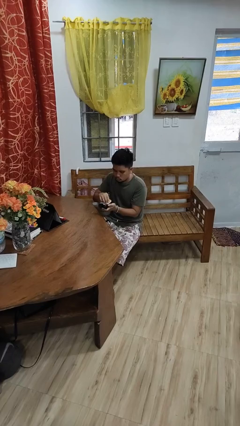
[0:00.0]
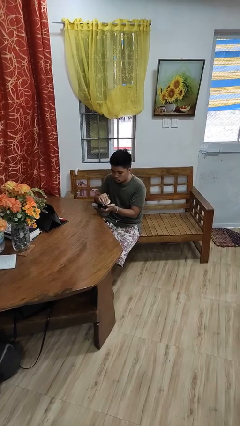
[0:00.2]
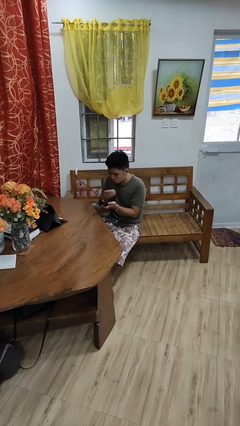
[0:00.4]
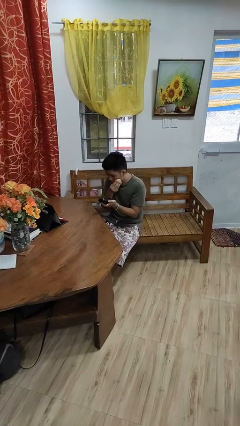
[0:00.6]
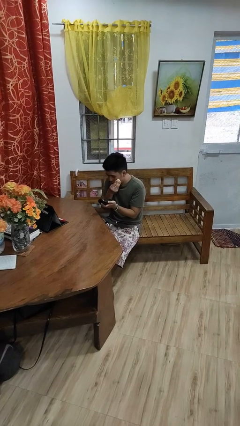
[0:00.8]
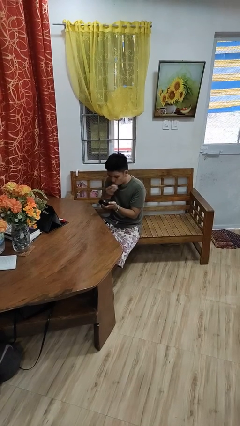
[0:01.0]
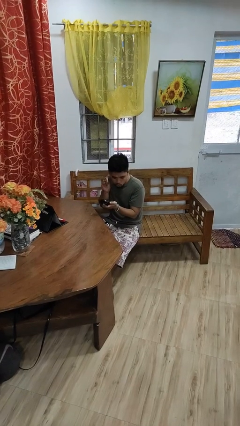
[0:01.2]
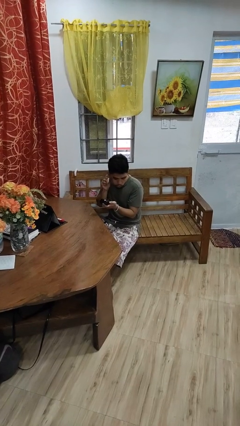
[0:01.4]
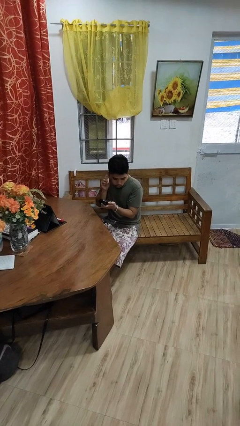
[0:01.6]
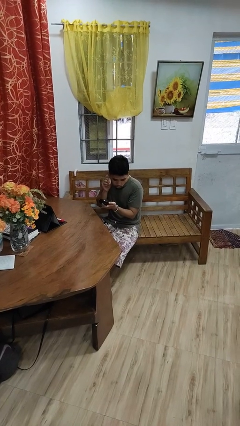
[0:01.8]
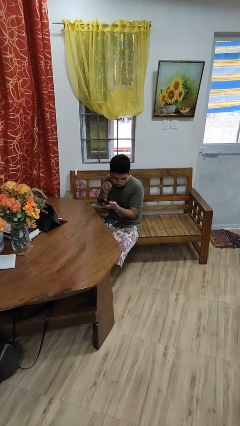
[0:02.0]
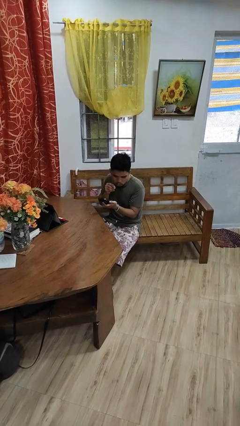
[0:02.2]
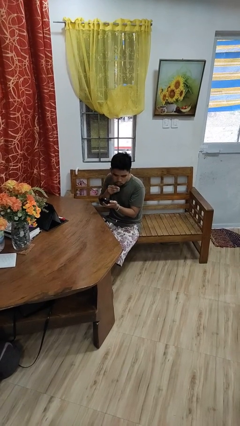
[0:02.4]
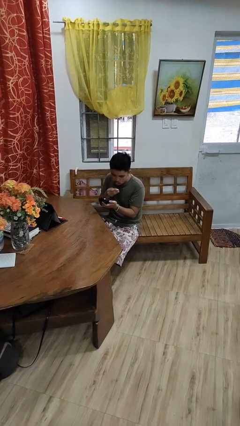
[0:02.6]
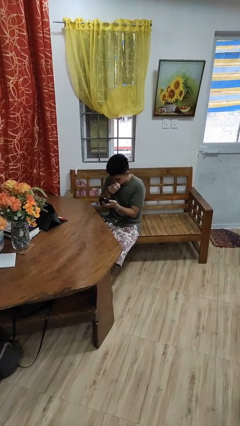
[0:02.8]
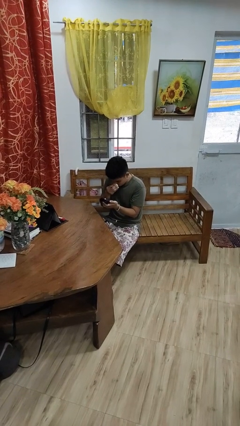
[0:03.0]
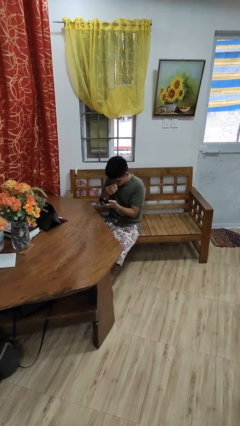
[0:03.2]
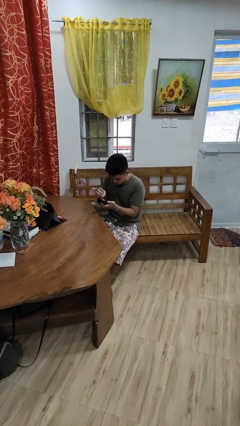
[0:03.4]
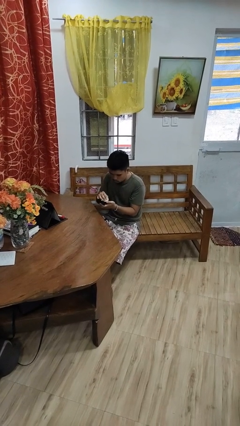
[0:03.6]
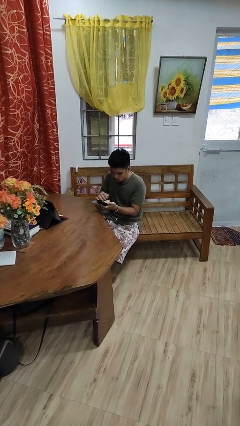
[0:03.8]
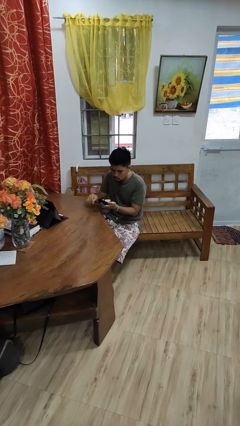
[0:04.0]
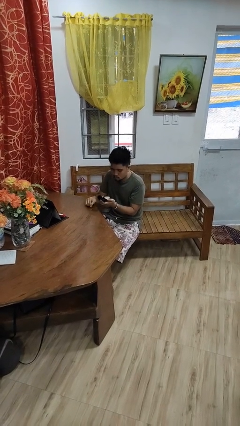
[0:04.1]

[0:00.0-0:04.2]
person applies foundation makeup

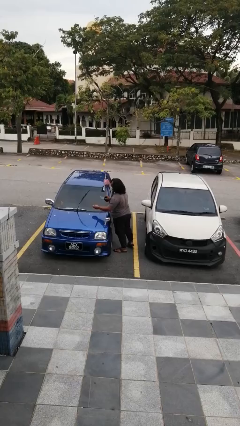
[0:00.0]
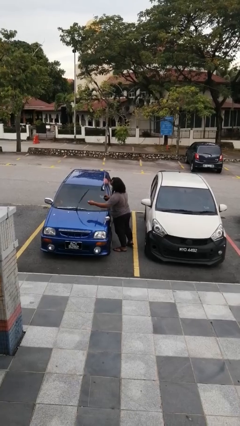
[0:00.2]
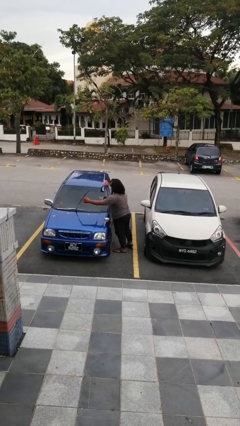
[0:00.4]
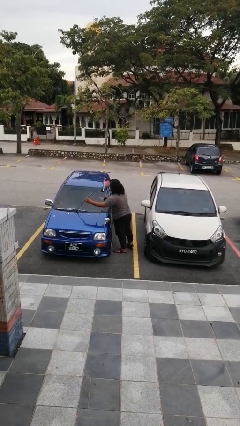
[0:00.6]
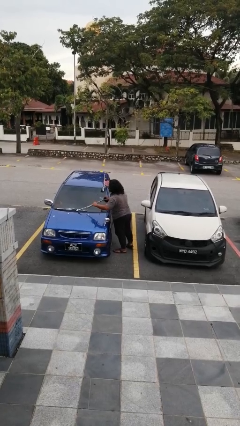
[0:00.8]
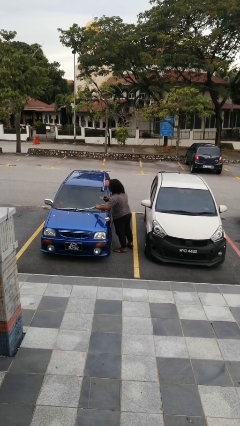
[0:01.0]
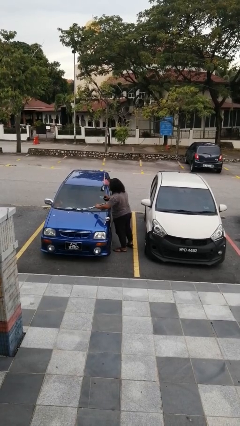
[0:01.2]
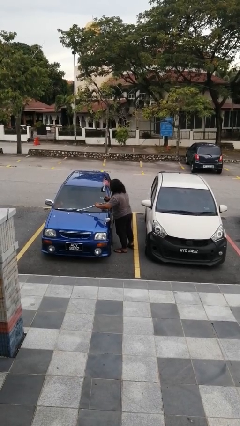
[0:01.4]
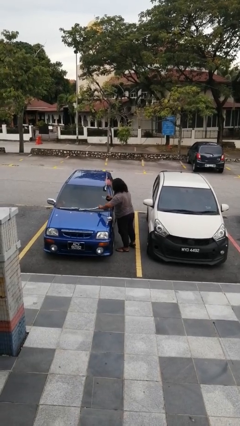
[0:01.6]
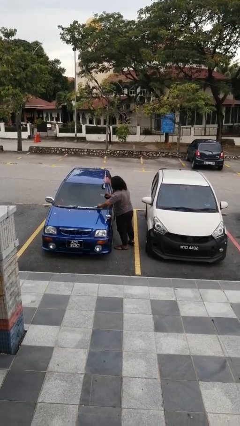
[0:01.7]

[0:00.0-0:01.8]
person flips down car wipers

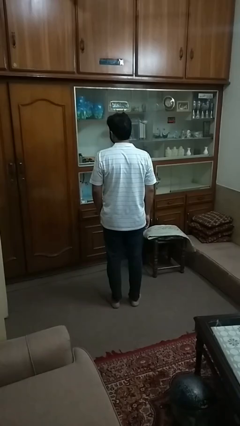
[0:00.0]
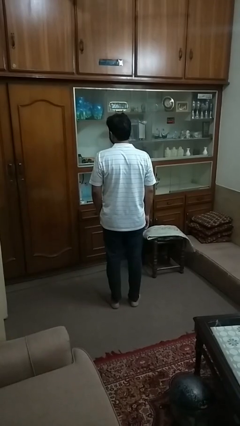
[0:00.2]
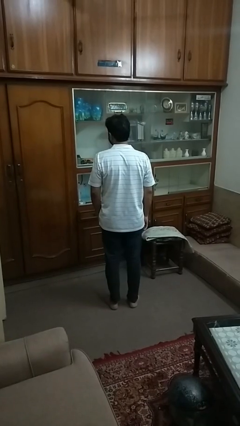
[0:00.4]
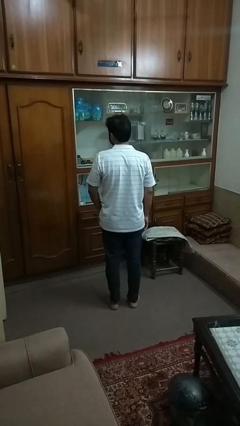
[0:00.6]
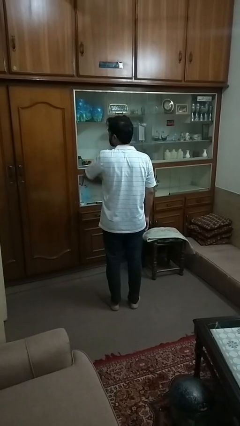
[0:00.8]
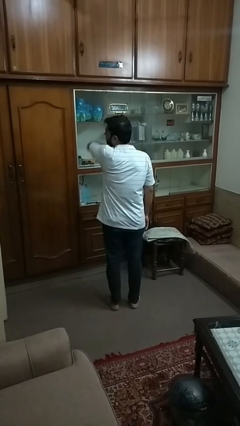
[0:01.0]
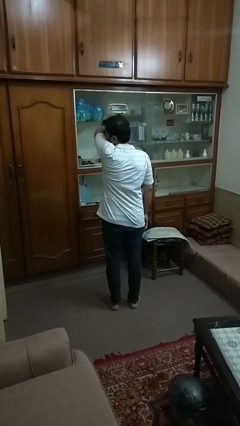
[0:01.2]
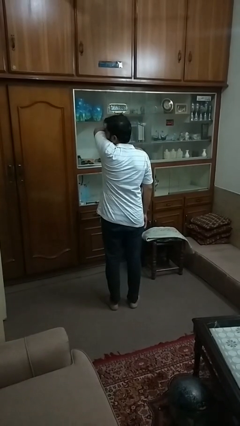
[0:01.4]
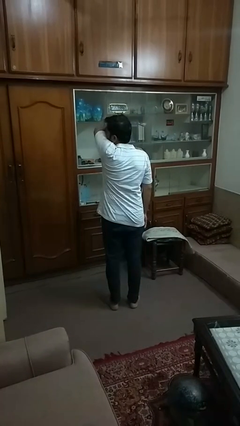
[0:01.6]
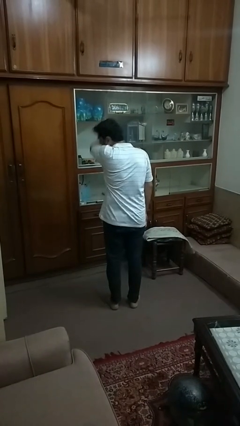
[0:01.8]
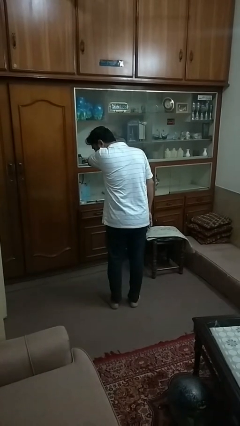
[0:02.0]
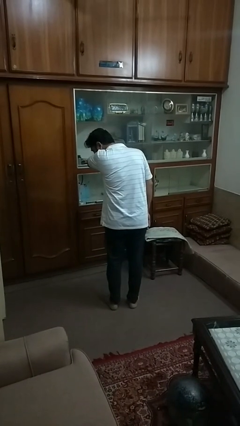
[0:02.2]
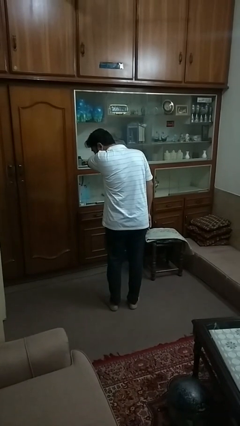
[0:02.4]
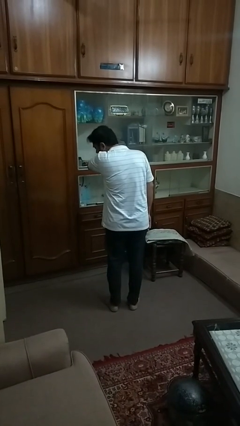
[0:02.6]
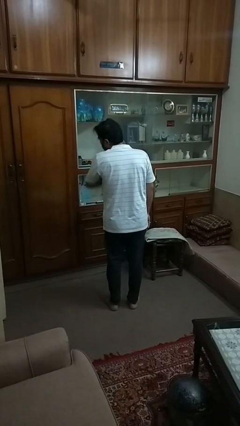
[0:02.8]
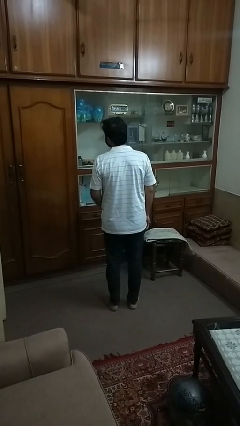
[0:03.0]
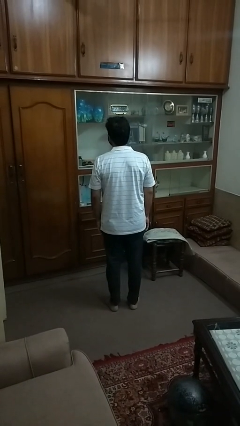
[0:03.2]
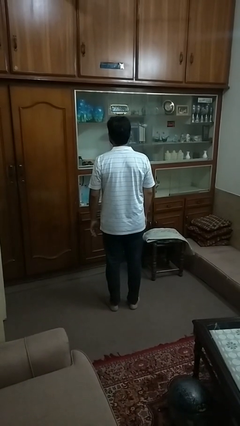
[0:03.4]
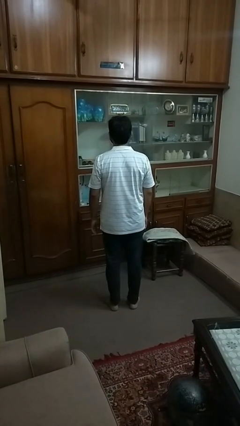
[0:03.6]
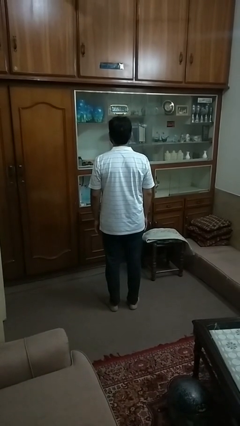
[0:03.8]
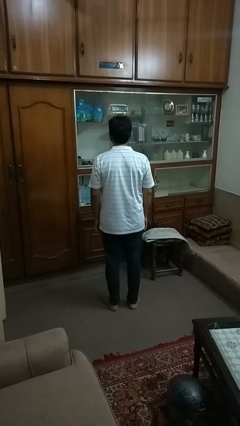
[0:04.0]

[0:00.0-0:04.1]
person sneezes into arm

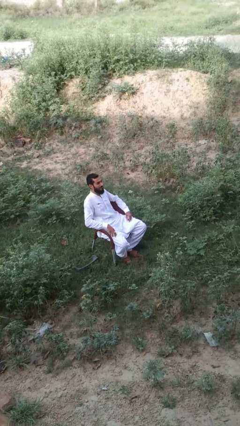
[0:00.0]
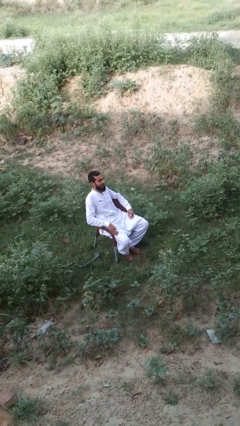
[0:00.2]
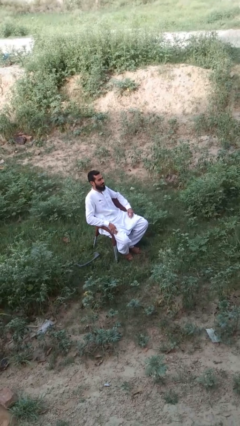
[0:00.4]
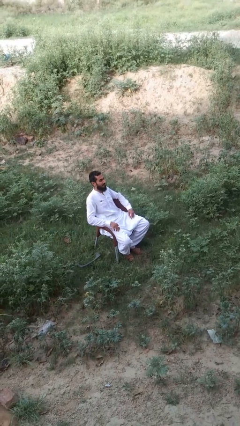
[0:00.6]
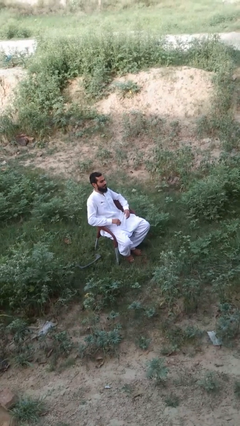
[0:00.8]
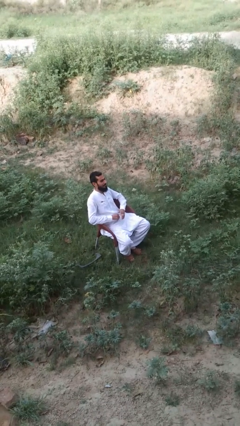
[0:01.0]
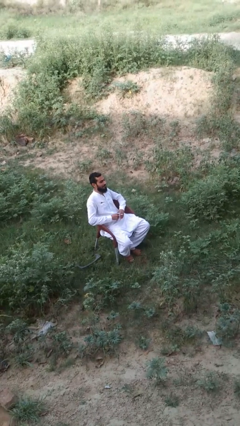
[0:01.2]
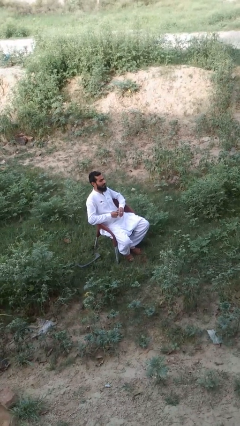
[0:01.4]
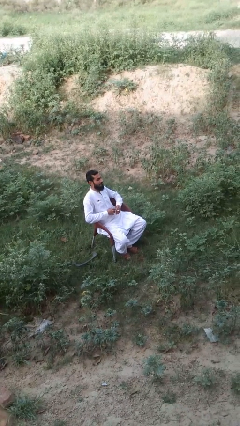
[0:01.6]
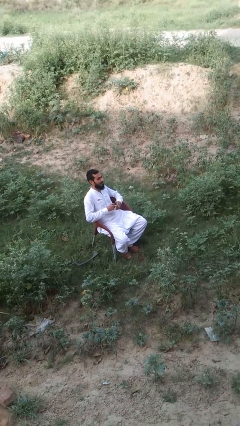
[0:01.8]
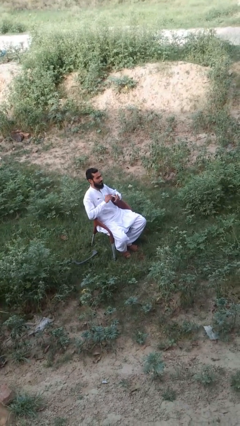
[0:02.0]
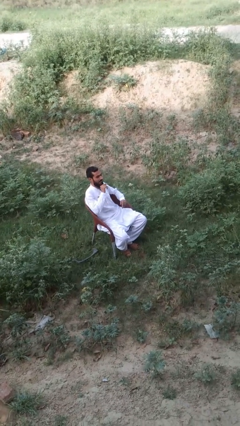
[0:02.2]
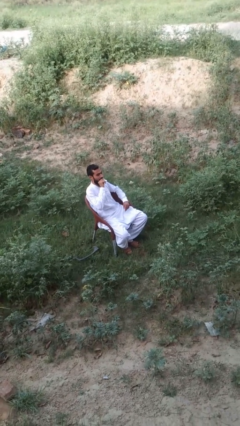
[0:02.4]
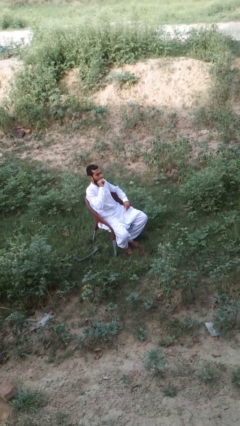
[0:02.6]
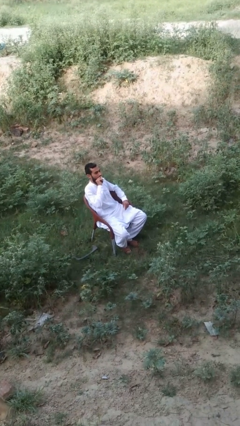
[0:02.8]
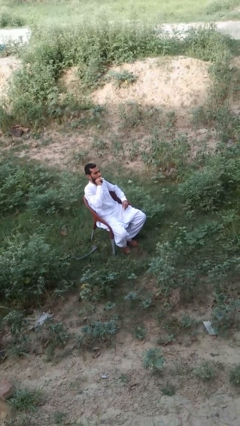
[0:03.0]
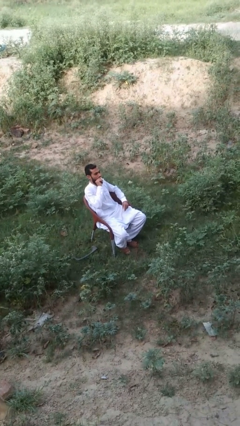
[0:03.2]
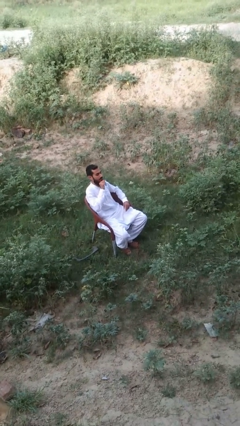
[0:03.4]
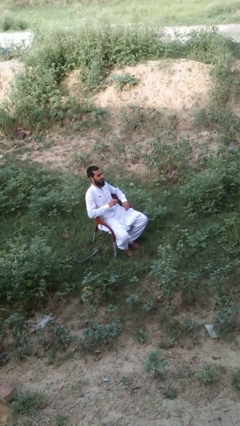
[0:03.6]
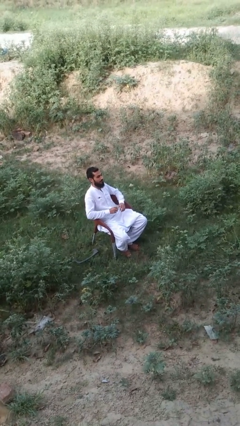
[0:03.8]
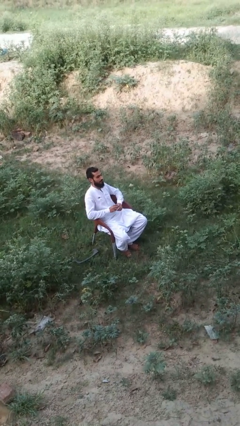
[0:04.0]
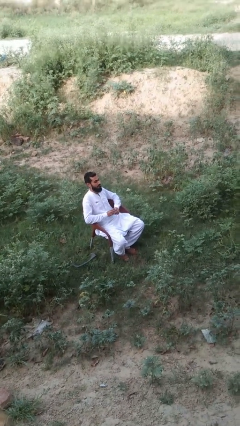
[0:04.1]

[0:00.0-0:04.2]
person vapes

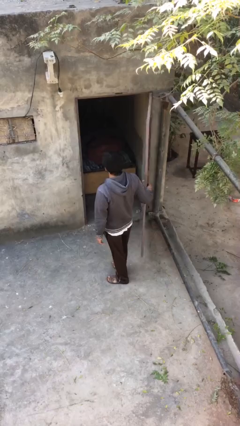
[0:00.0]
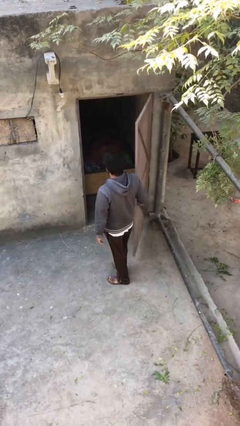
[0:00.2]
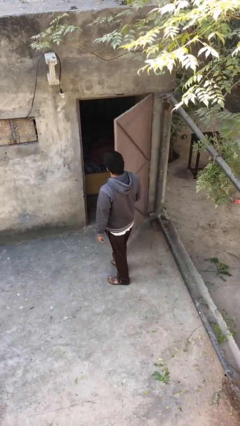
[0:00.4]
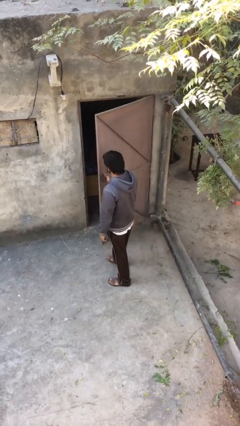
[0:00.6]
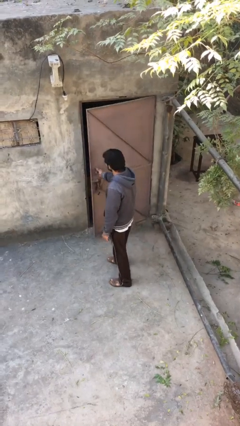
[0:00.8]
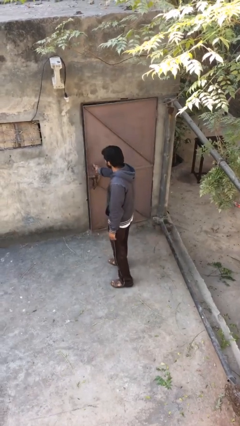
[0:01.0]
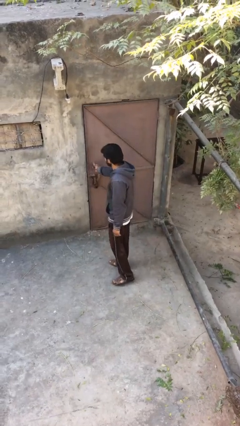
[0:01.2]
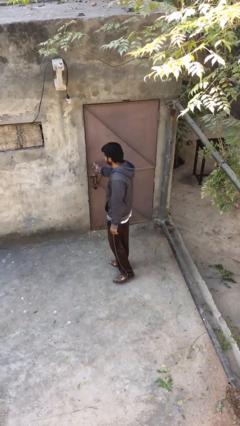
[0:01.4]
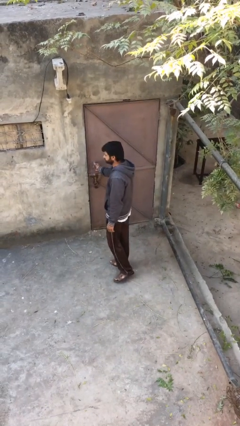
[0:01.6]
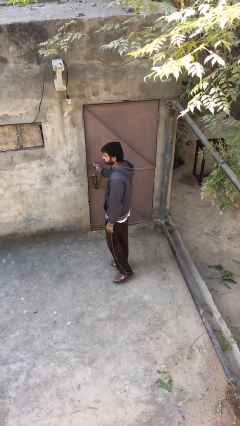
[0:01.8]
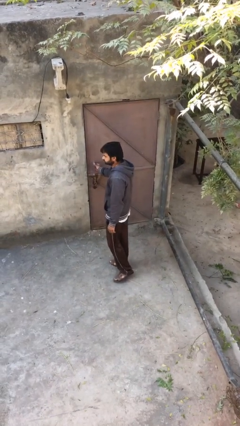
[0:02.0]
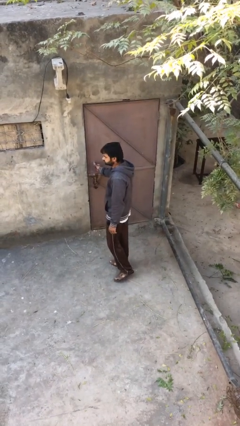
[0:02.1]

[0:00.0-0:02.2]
person closes facility door

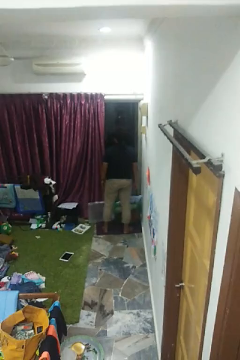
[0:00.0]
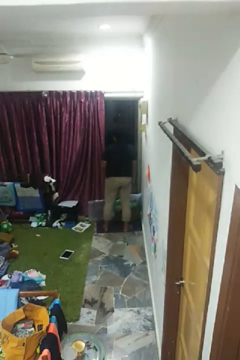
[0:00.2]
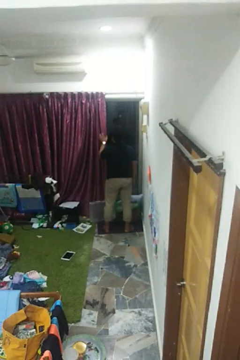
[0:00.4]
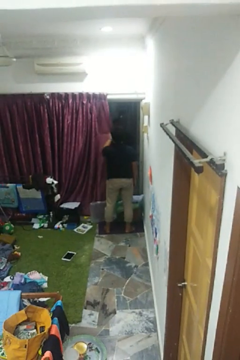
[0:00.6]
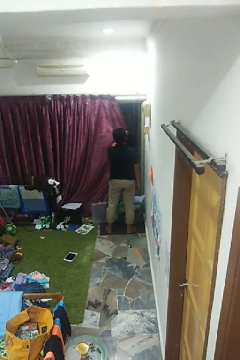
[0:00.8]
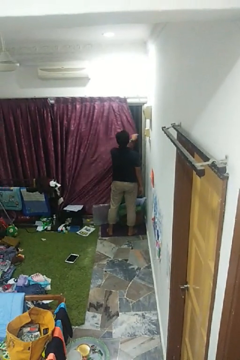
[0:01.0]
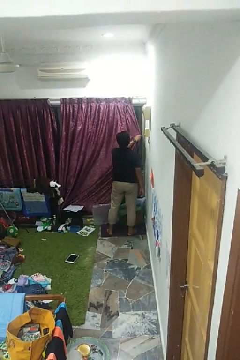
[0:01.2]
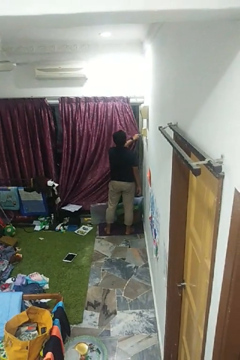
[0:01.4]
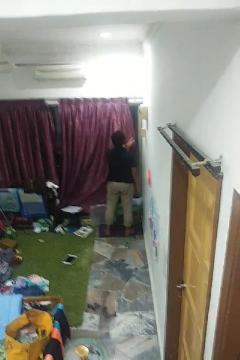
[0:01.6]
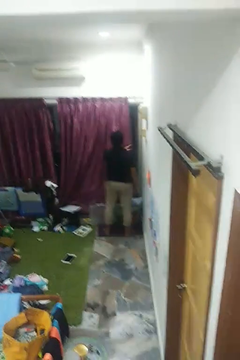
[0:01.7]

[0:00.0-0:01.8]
person closes curtains
